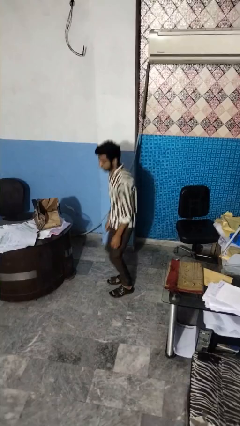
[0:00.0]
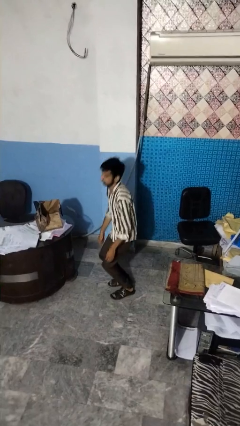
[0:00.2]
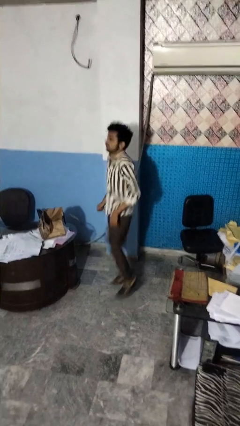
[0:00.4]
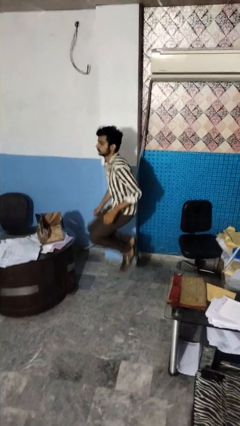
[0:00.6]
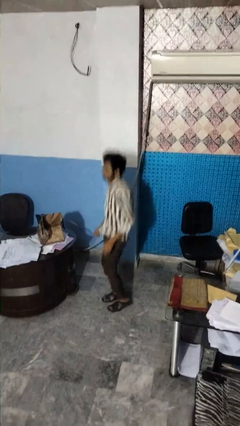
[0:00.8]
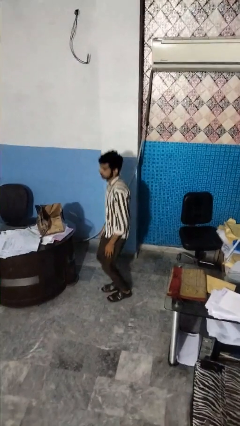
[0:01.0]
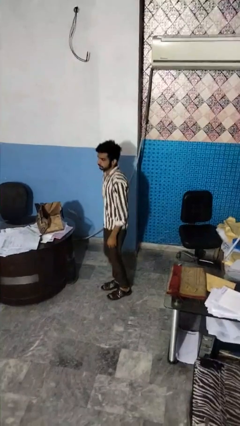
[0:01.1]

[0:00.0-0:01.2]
person jumps

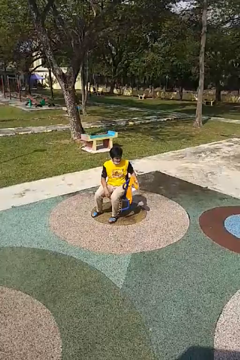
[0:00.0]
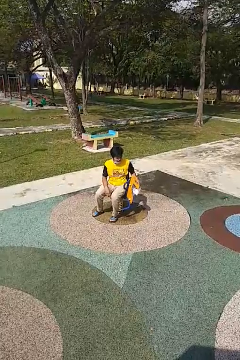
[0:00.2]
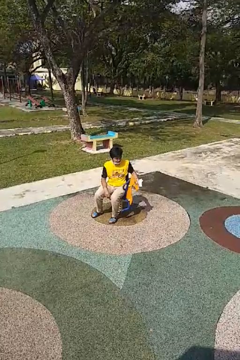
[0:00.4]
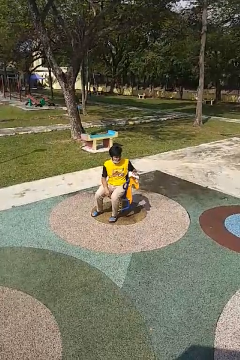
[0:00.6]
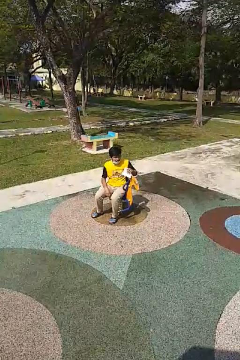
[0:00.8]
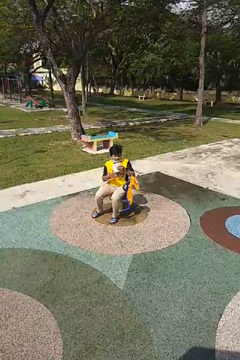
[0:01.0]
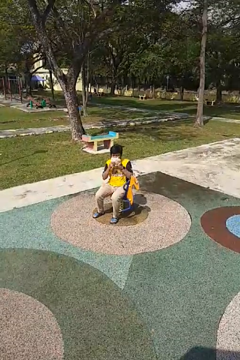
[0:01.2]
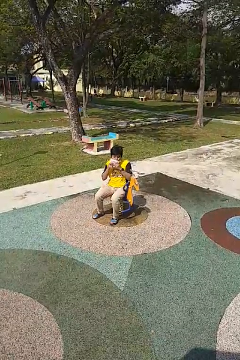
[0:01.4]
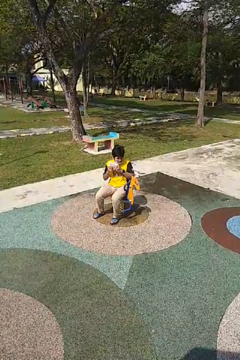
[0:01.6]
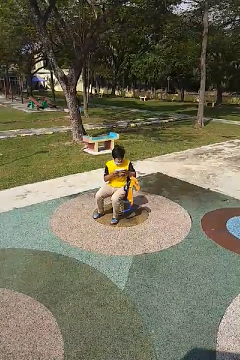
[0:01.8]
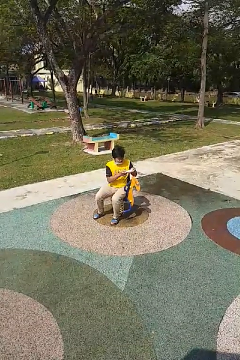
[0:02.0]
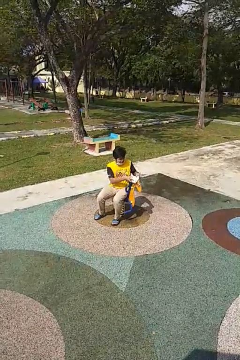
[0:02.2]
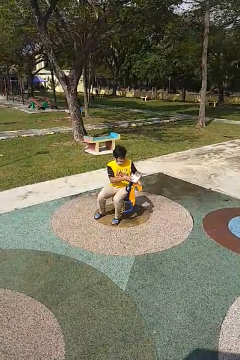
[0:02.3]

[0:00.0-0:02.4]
person wipes mouth with napkin

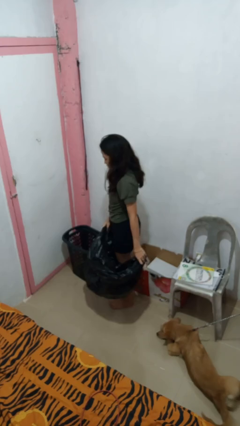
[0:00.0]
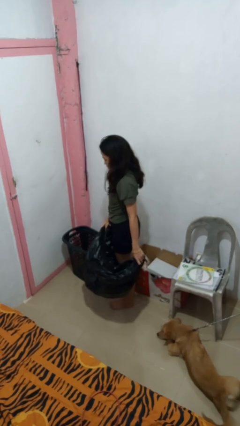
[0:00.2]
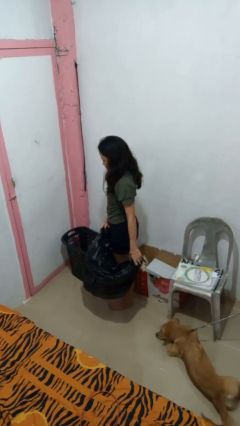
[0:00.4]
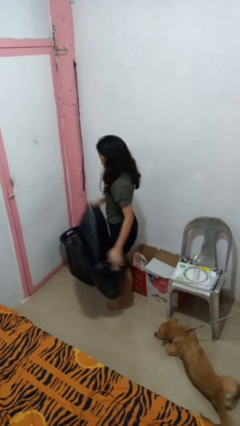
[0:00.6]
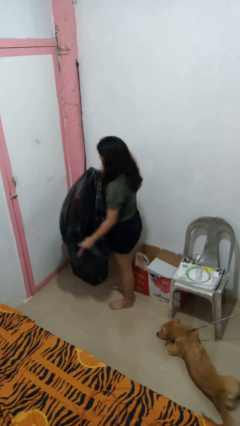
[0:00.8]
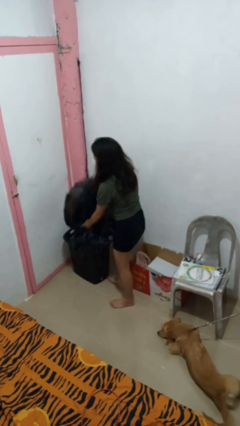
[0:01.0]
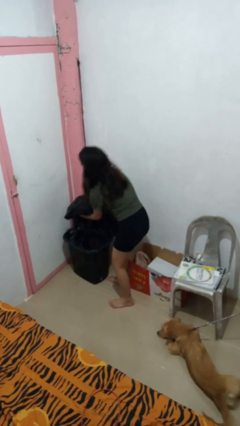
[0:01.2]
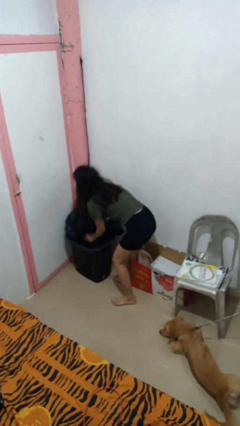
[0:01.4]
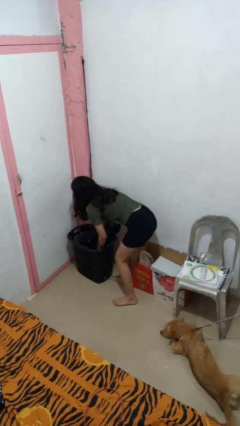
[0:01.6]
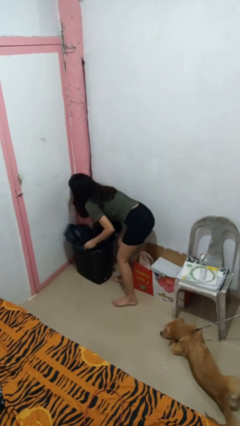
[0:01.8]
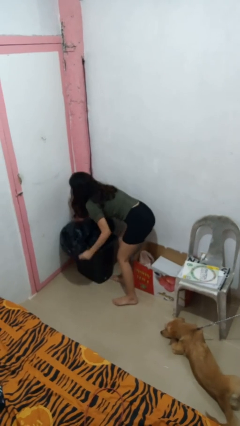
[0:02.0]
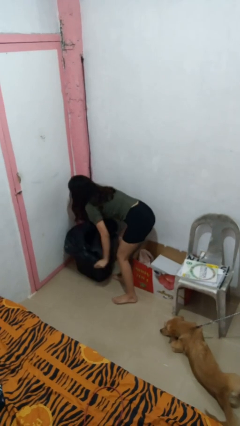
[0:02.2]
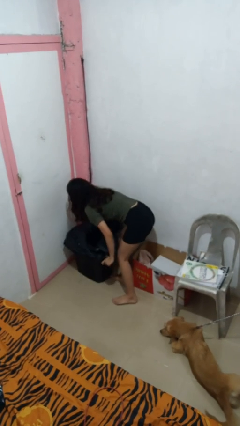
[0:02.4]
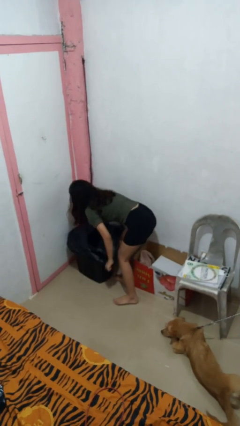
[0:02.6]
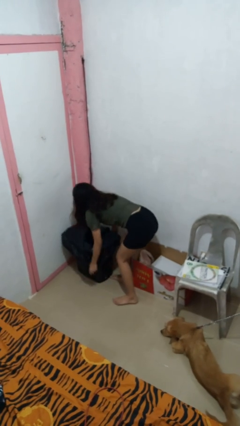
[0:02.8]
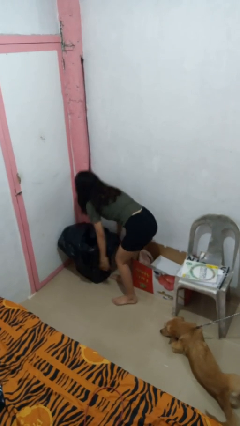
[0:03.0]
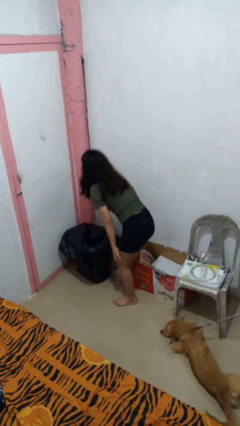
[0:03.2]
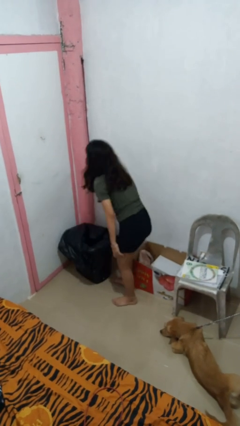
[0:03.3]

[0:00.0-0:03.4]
person inserts trashbag into trashcan

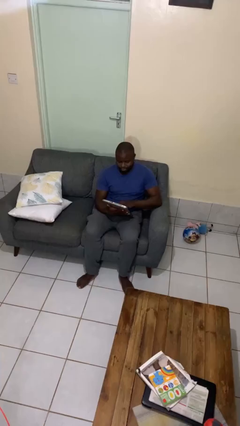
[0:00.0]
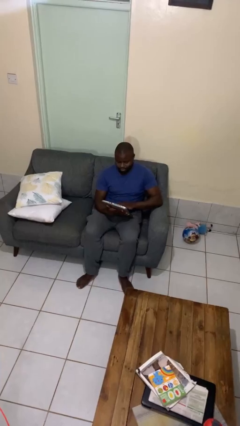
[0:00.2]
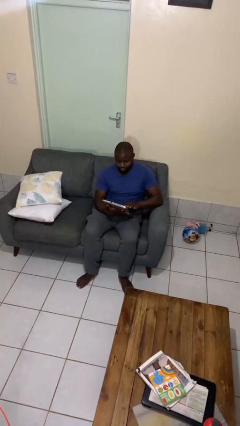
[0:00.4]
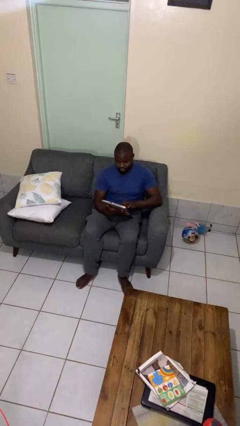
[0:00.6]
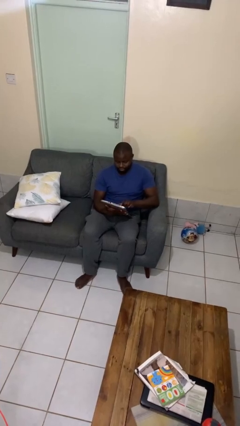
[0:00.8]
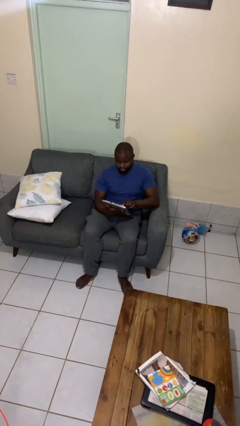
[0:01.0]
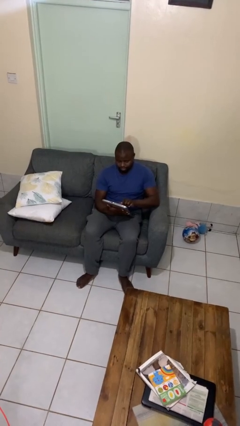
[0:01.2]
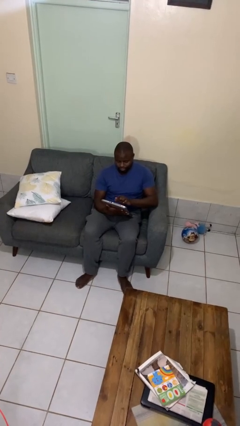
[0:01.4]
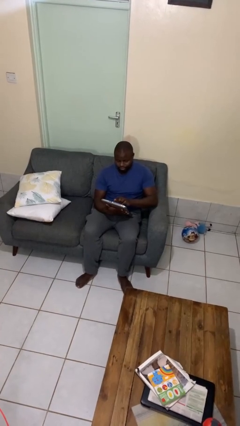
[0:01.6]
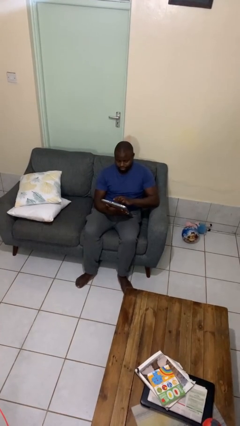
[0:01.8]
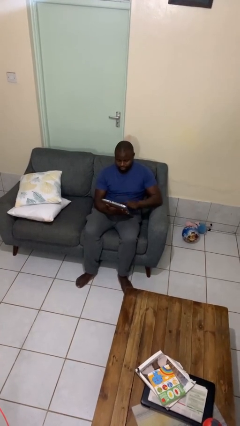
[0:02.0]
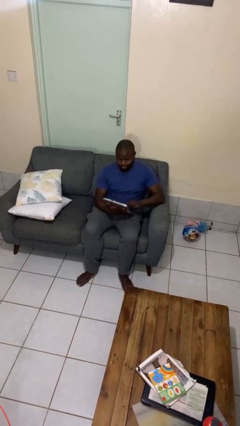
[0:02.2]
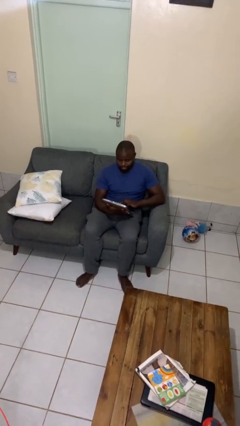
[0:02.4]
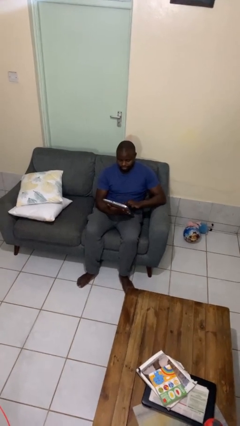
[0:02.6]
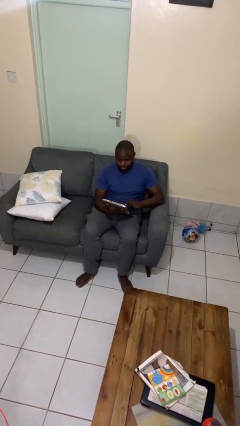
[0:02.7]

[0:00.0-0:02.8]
person interacts with tablet

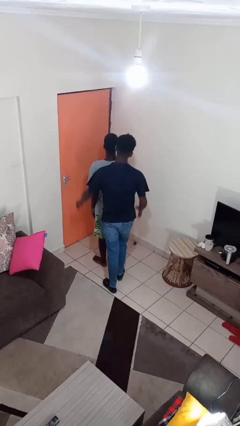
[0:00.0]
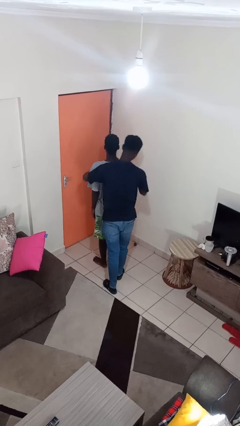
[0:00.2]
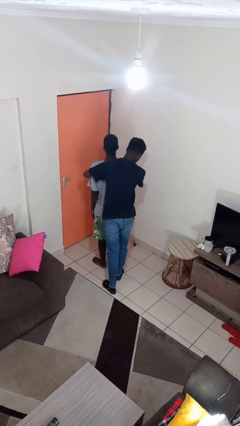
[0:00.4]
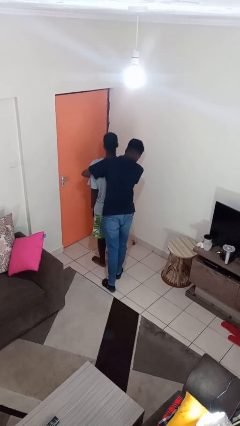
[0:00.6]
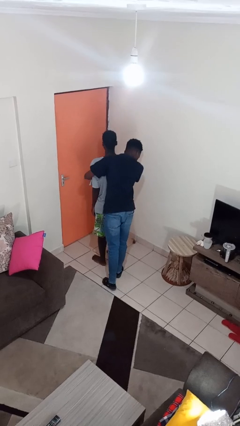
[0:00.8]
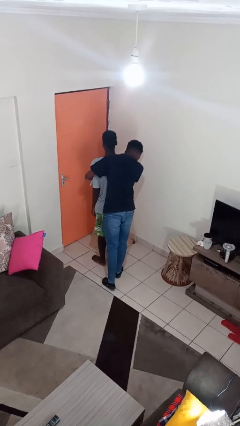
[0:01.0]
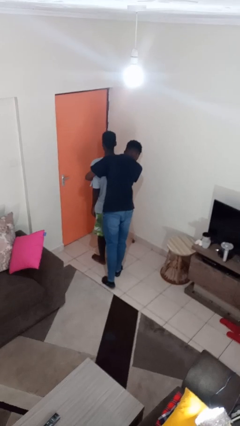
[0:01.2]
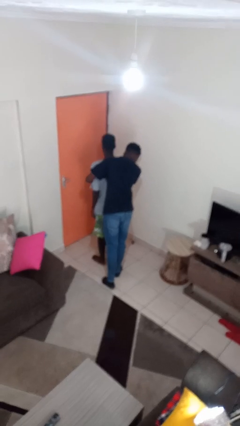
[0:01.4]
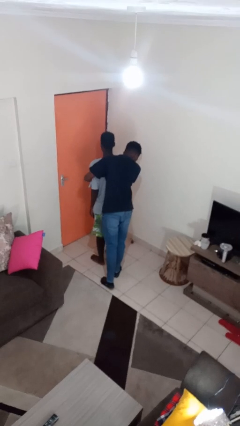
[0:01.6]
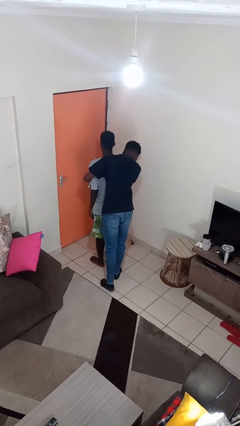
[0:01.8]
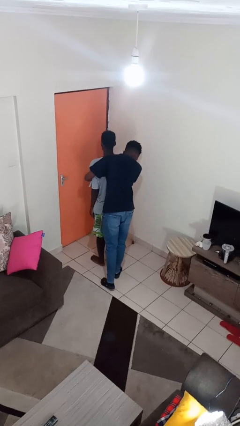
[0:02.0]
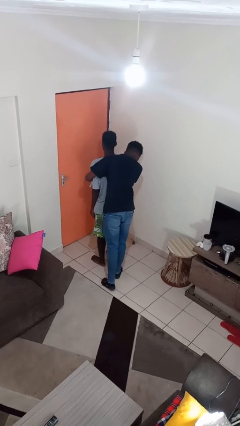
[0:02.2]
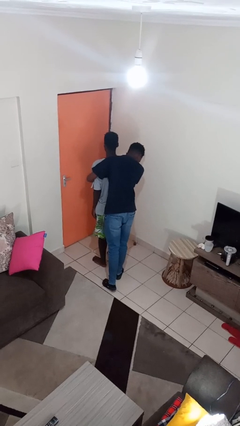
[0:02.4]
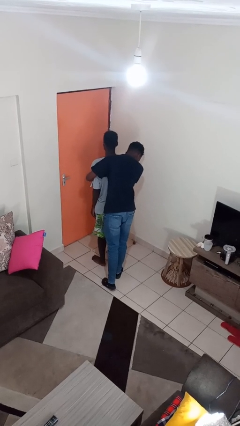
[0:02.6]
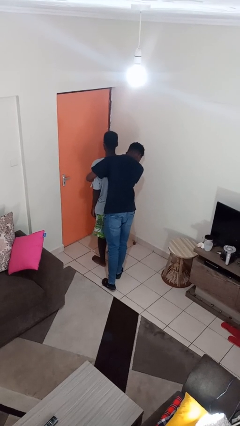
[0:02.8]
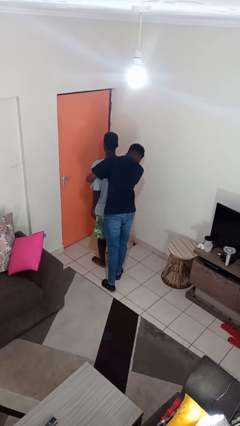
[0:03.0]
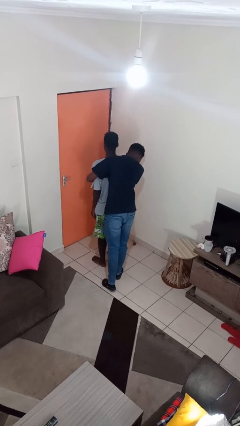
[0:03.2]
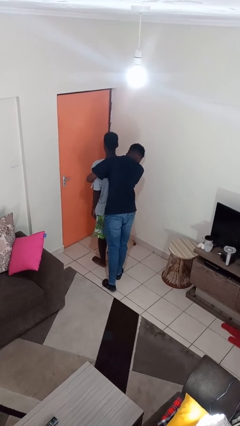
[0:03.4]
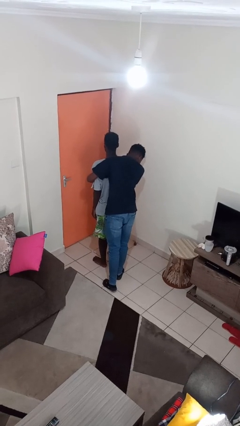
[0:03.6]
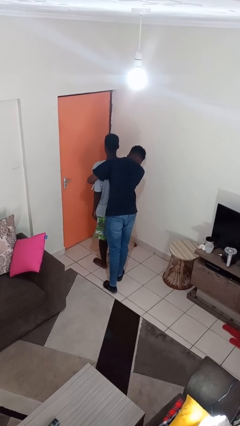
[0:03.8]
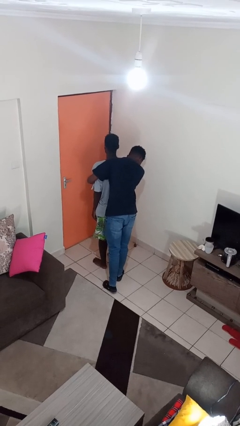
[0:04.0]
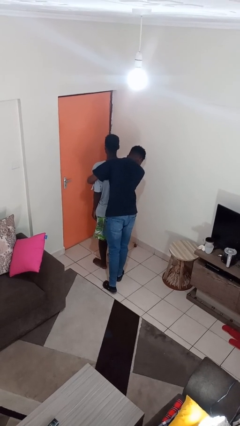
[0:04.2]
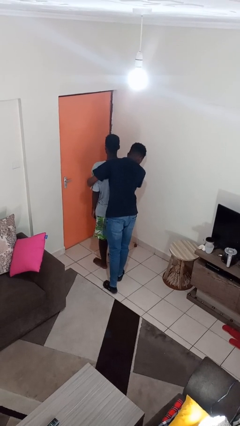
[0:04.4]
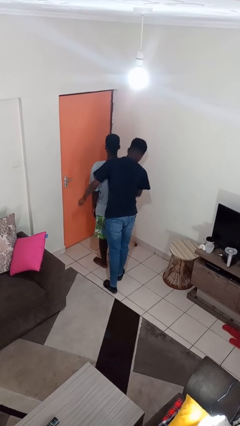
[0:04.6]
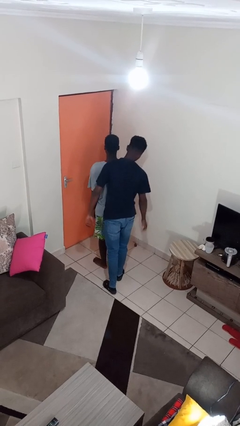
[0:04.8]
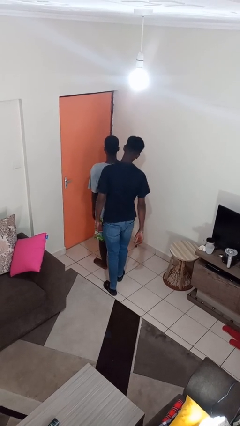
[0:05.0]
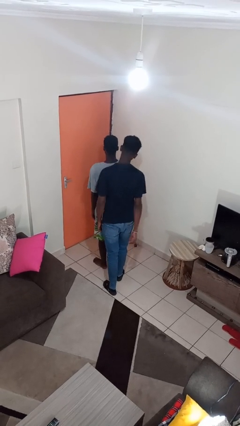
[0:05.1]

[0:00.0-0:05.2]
person hugs person from behind

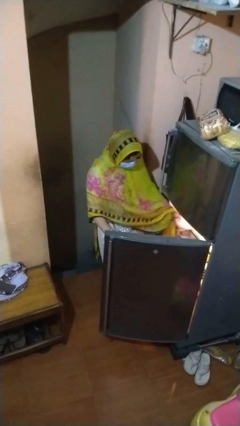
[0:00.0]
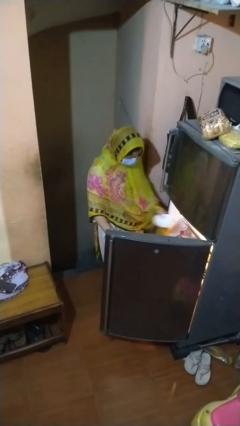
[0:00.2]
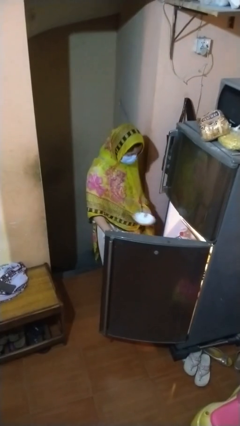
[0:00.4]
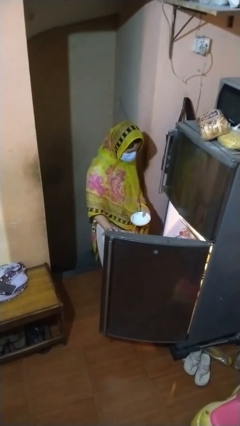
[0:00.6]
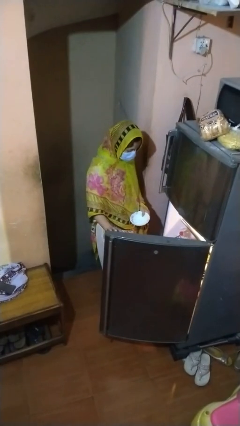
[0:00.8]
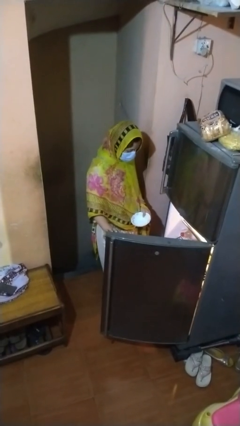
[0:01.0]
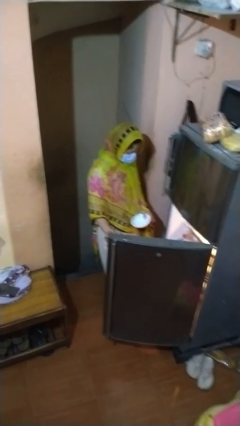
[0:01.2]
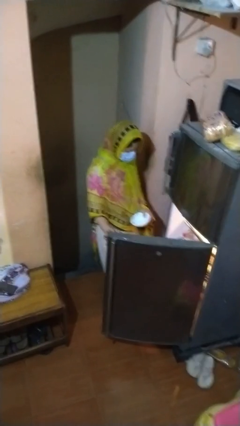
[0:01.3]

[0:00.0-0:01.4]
person takes object from refrigerator

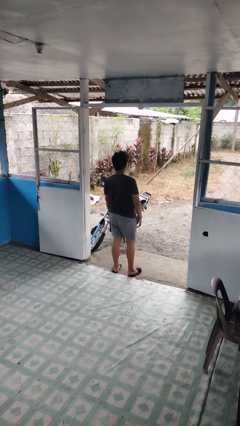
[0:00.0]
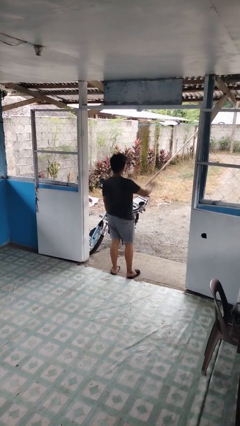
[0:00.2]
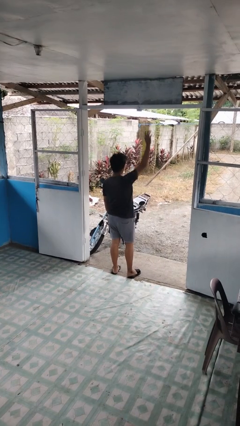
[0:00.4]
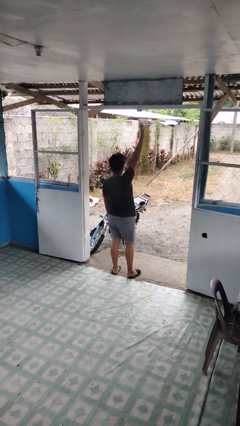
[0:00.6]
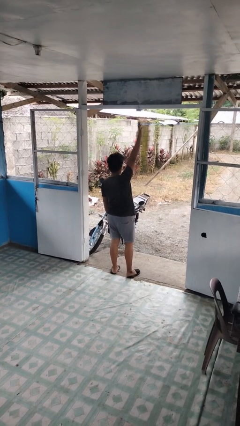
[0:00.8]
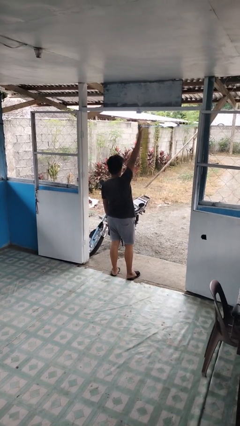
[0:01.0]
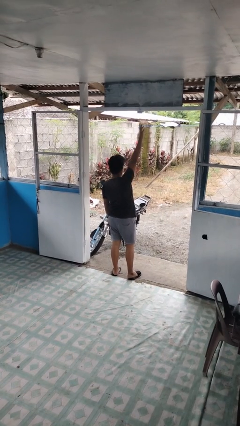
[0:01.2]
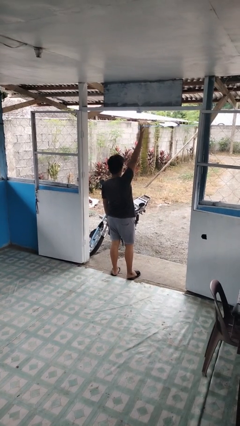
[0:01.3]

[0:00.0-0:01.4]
person gestures raise hand
